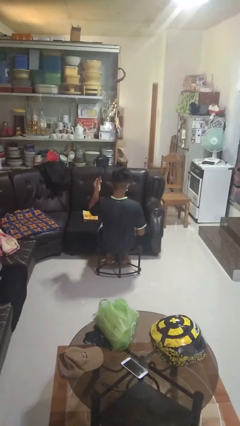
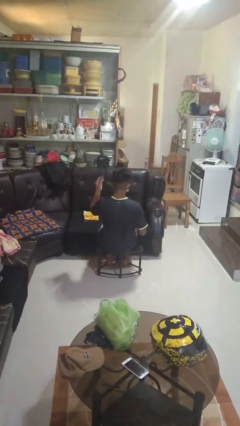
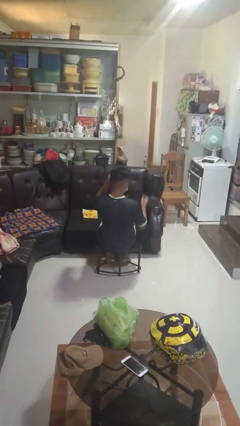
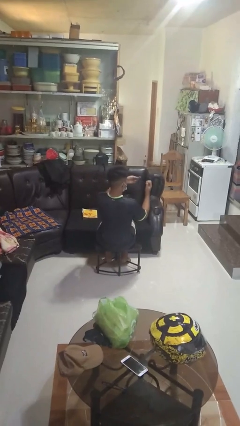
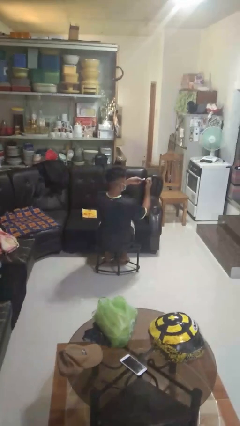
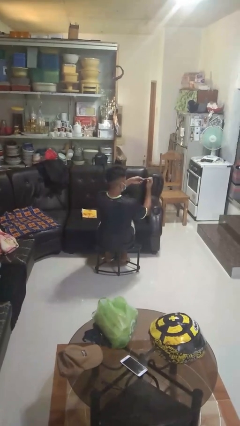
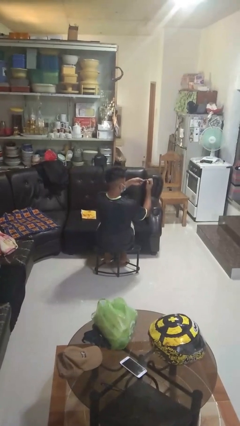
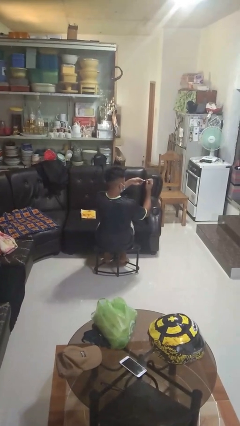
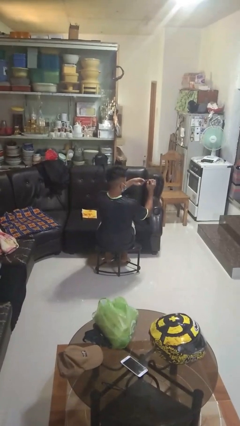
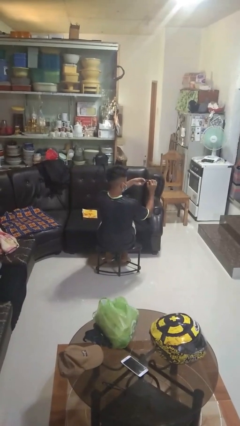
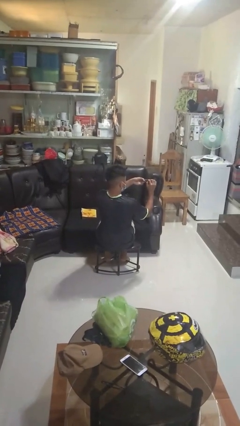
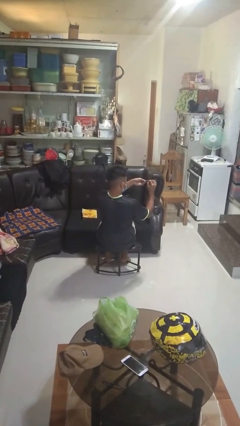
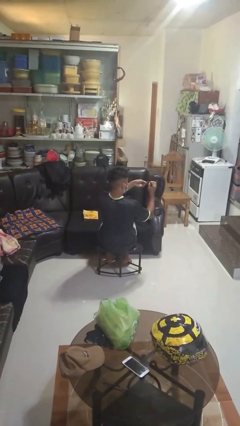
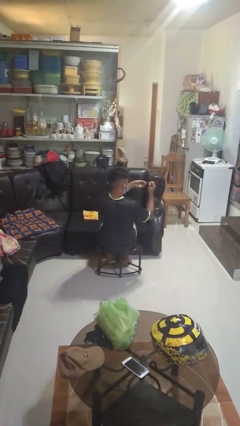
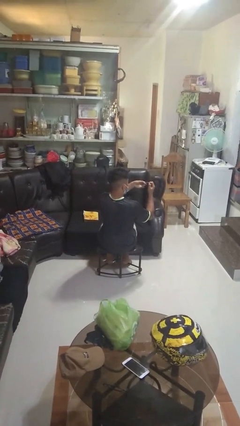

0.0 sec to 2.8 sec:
person clips fingernails

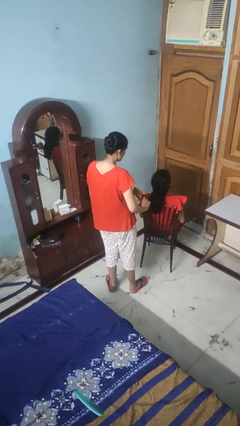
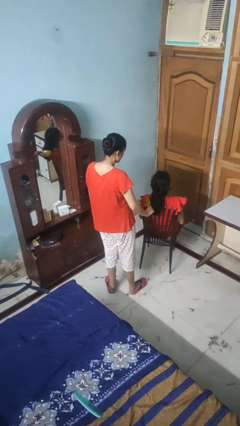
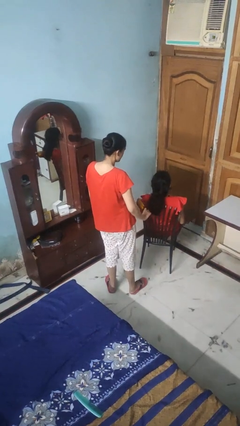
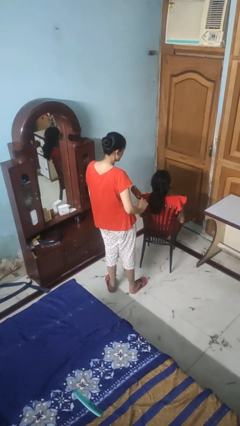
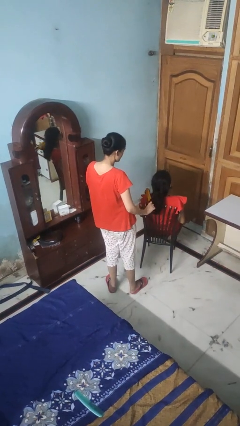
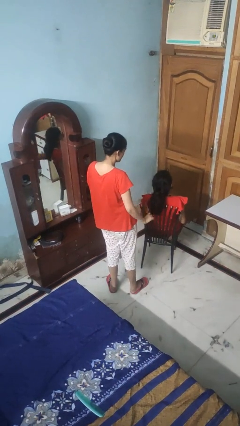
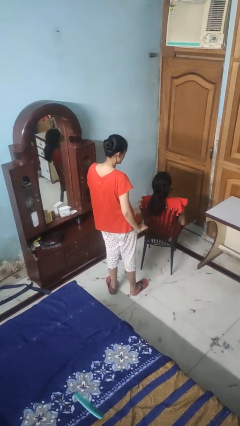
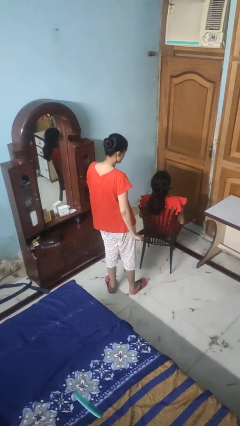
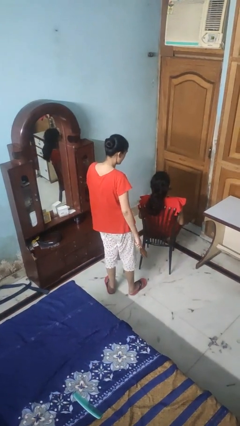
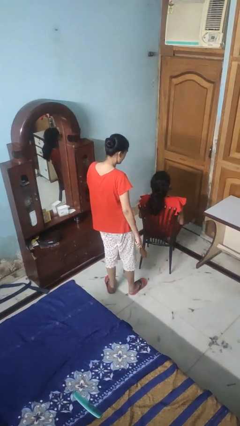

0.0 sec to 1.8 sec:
person brushes hair of person

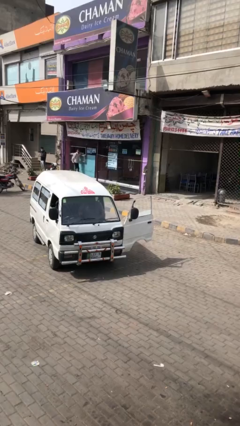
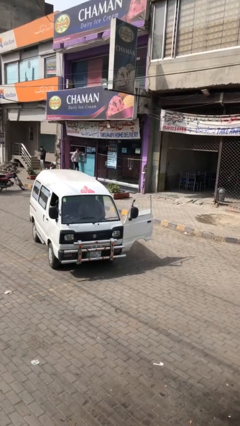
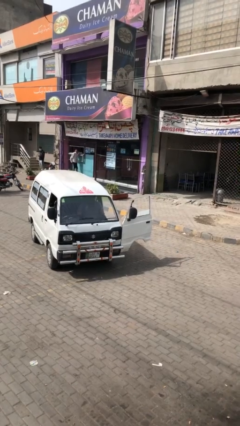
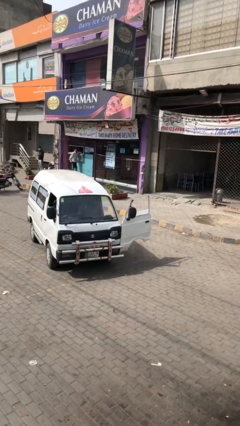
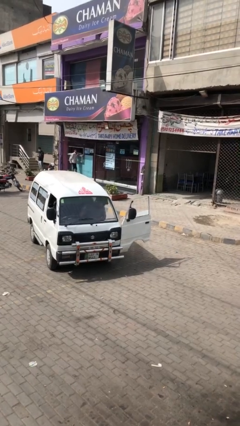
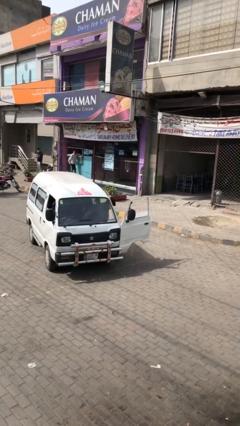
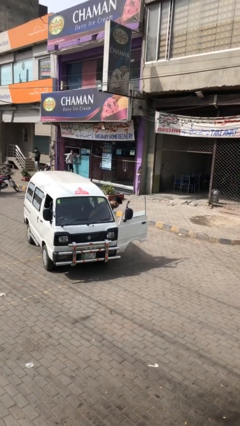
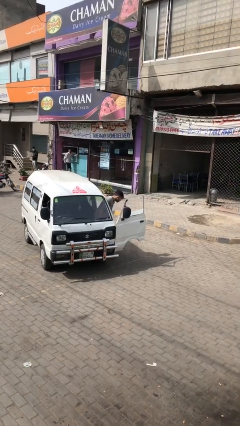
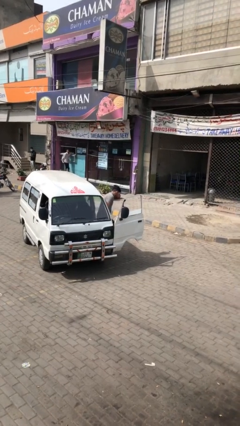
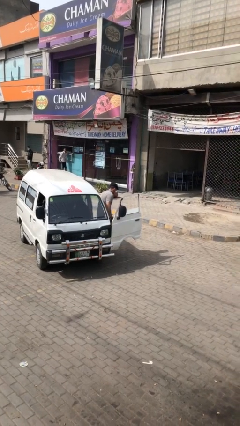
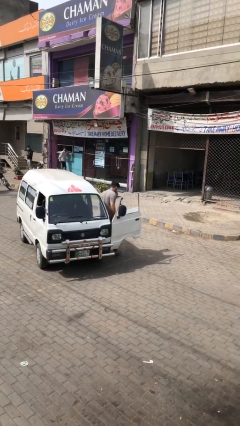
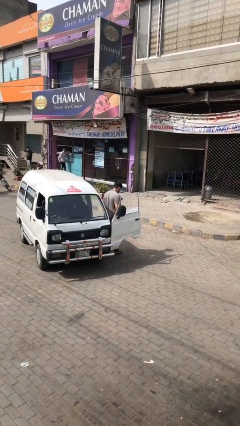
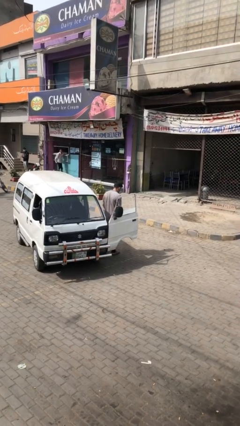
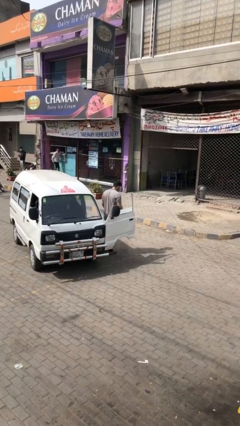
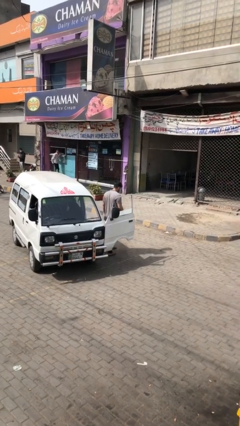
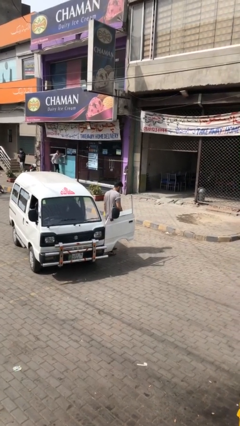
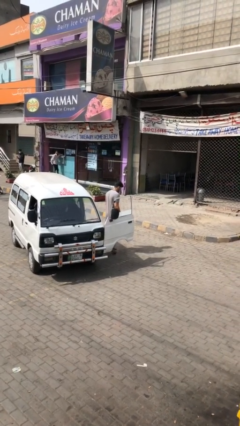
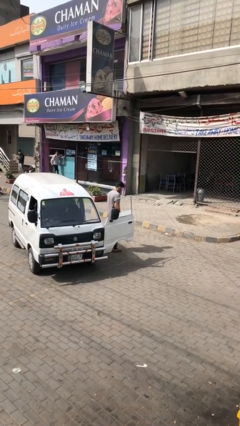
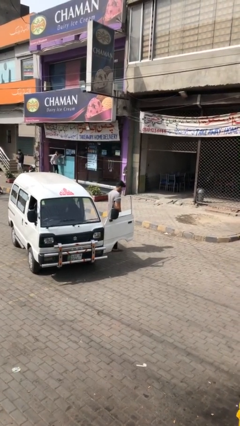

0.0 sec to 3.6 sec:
person exits car

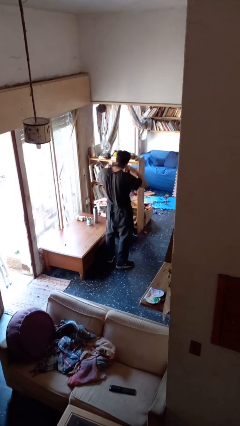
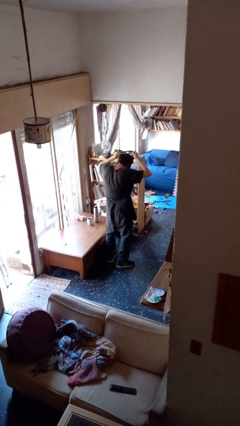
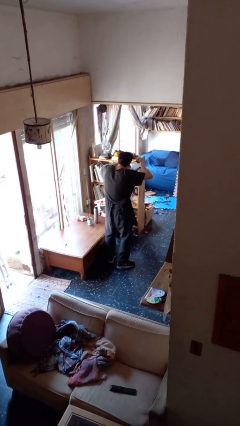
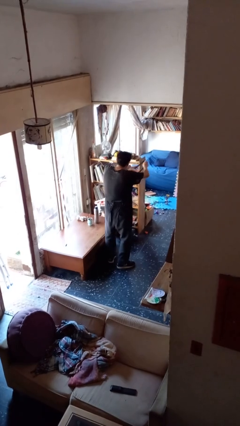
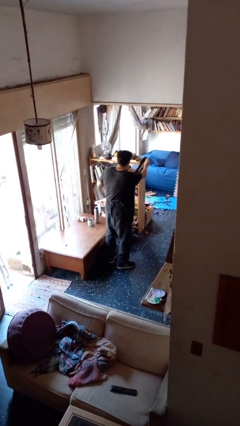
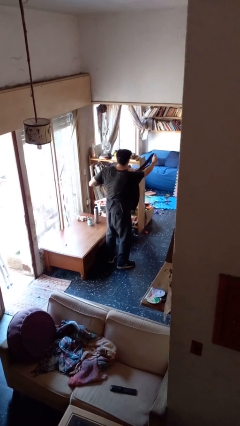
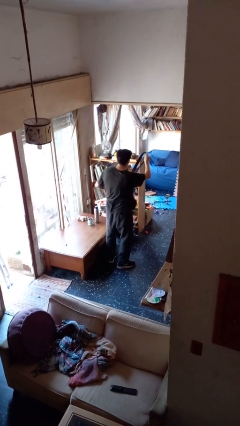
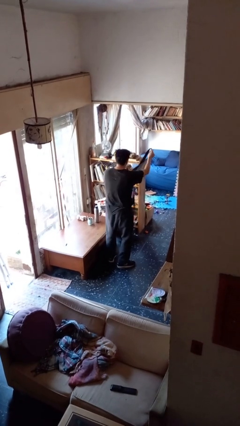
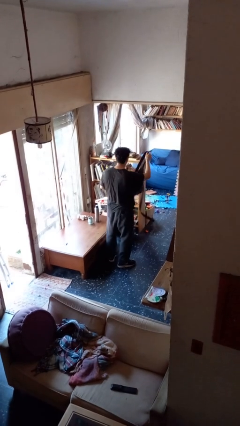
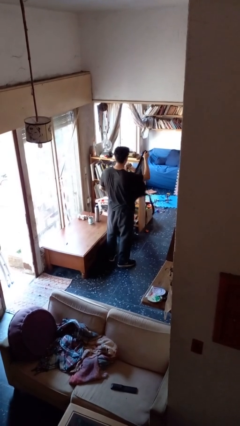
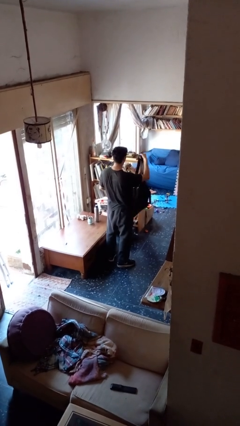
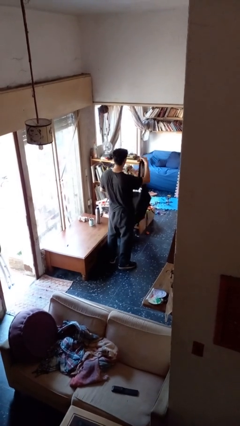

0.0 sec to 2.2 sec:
person takes off apron

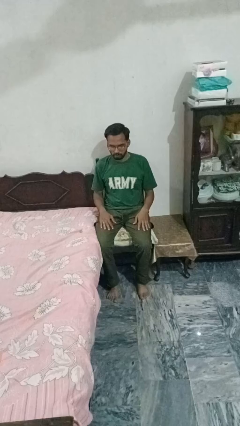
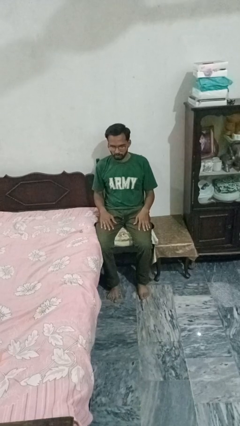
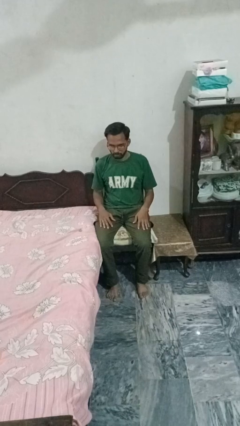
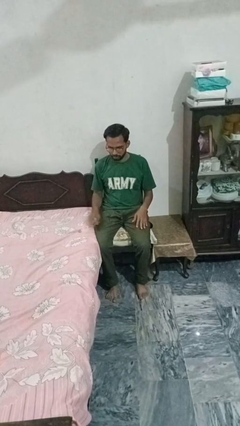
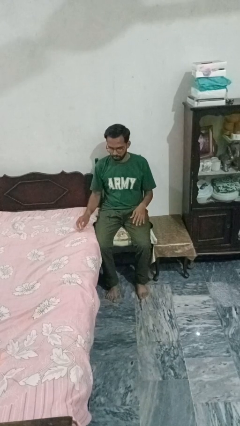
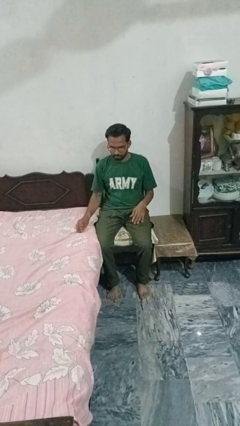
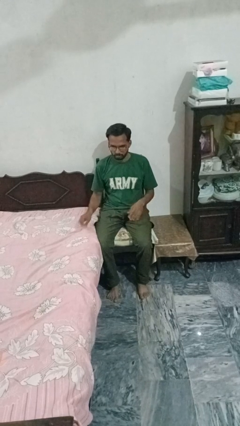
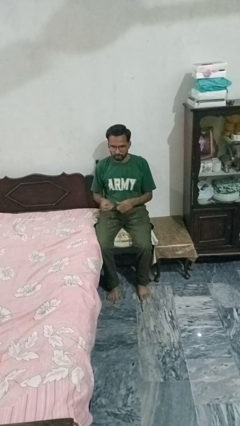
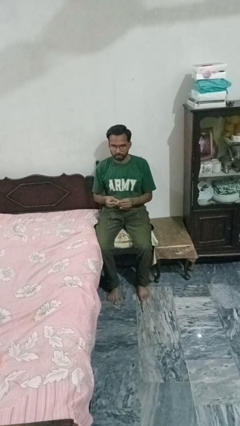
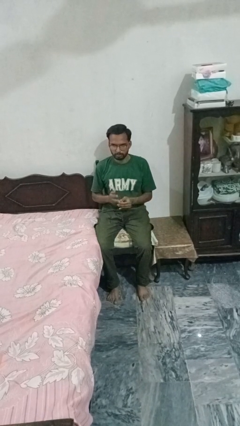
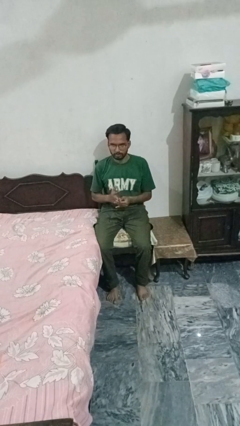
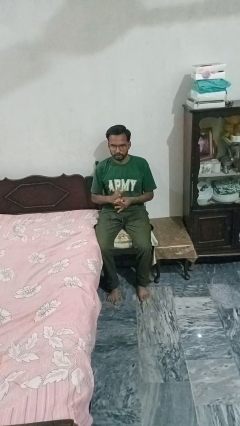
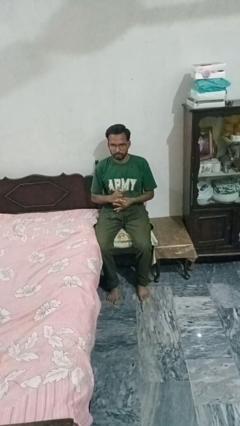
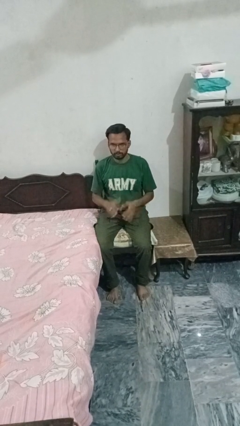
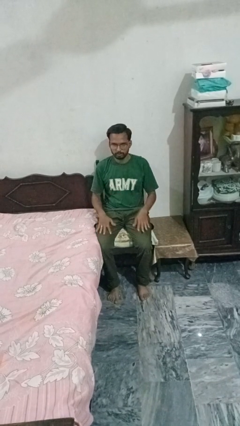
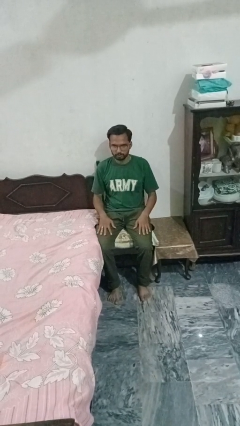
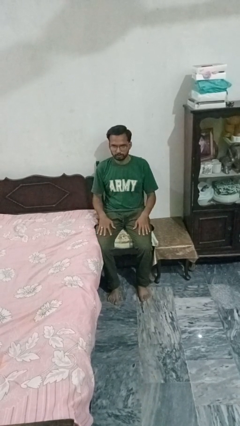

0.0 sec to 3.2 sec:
person puts on ring

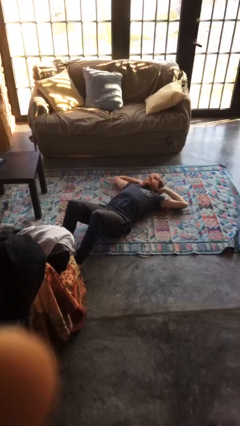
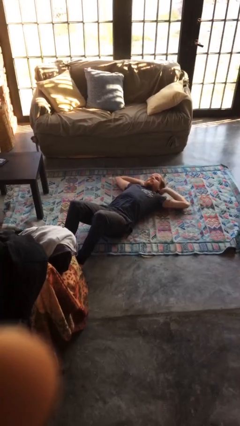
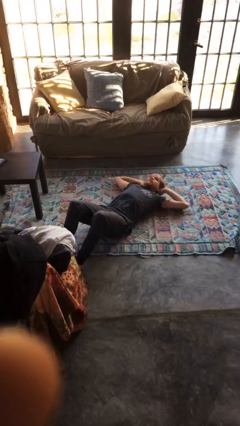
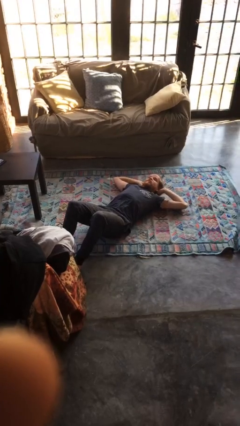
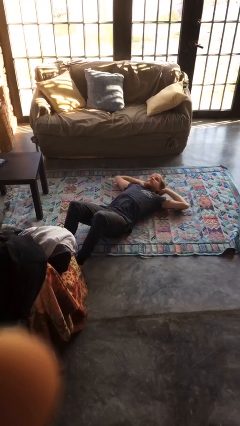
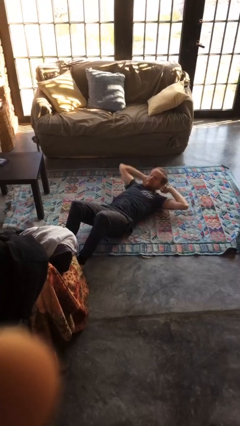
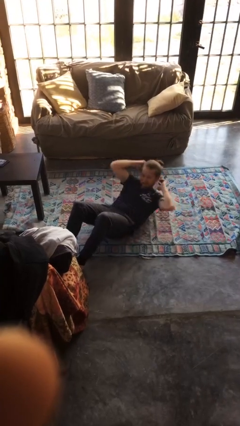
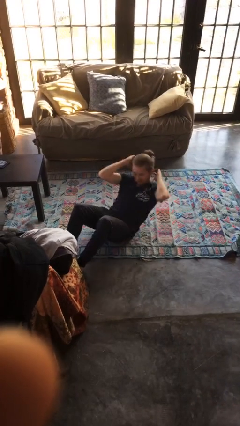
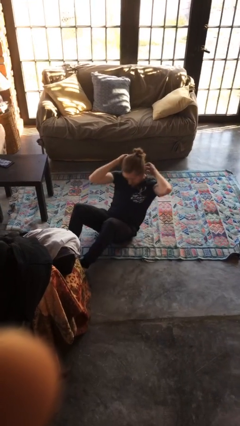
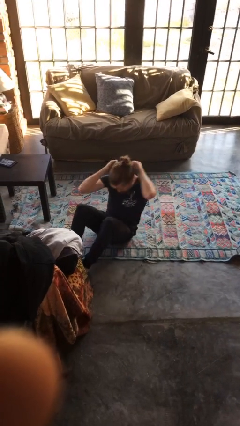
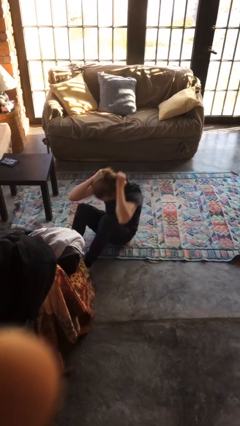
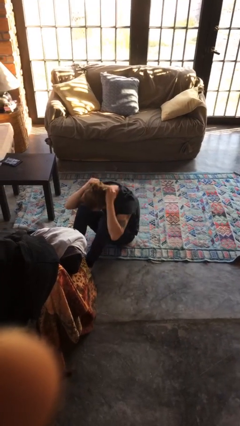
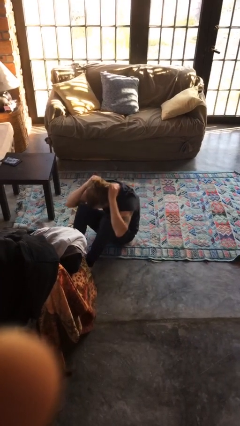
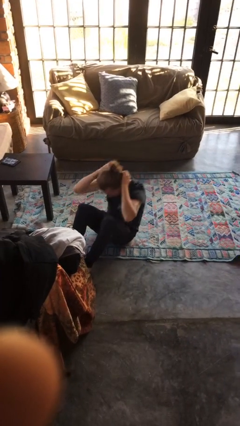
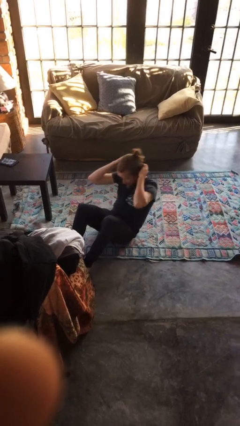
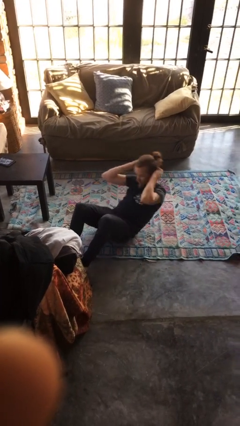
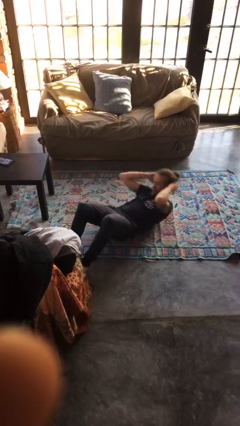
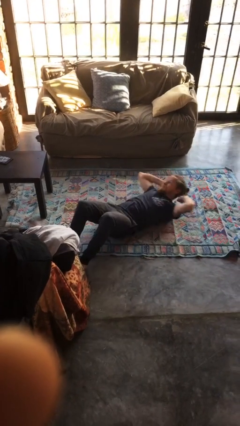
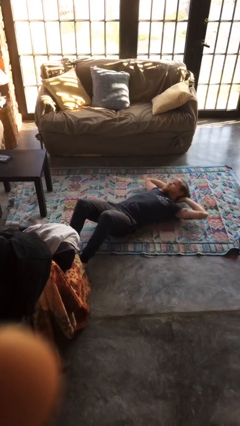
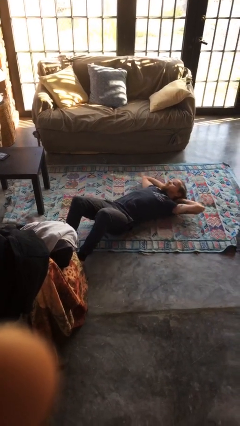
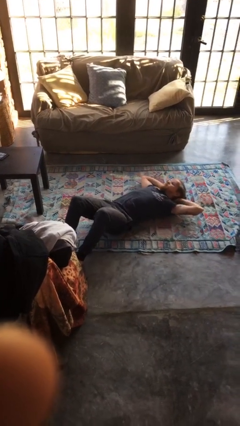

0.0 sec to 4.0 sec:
person exercises with situp
